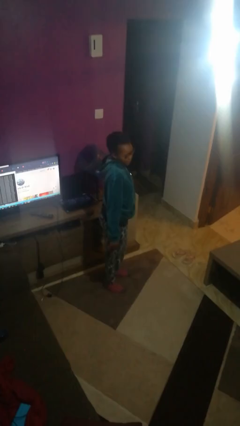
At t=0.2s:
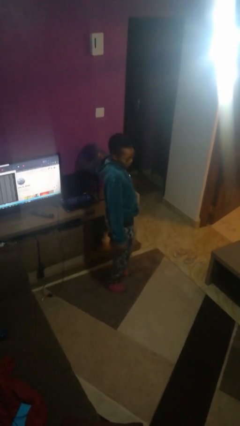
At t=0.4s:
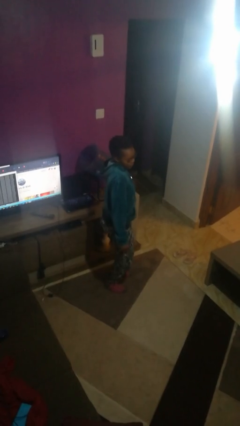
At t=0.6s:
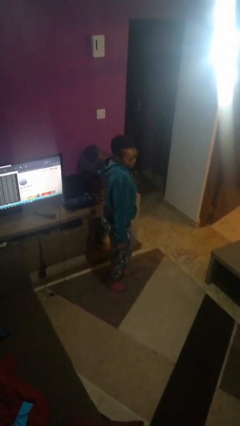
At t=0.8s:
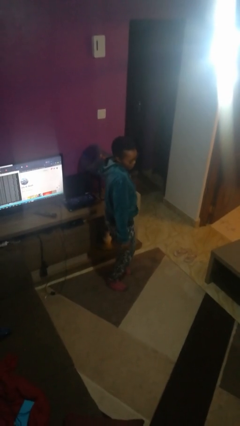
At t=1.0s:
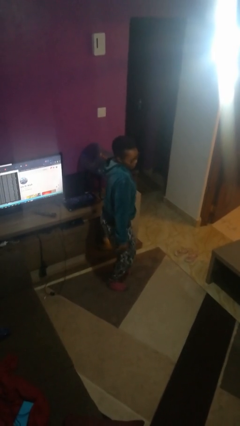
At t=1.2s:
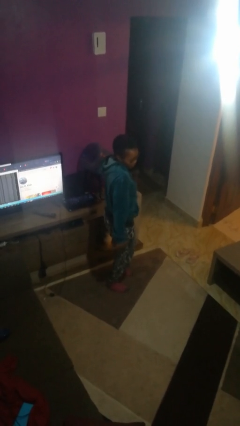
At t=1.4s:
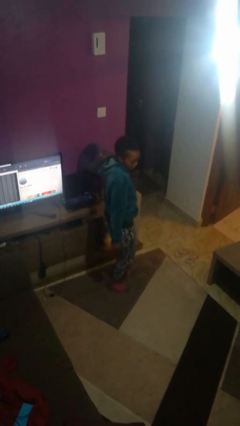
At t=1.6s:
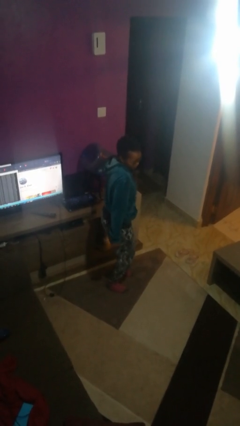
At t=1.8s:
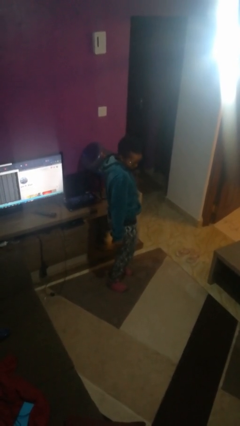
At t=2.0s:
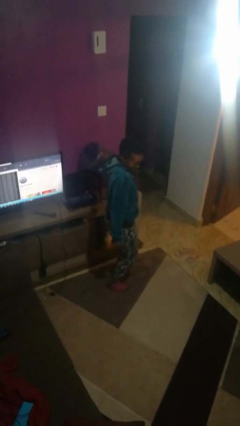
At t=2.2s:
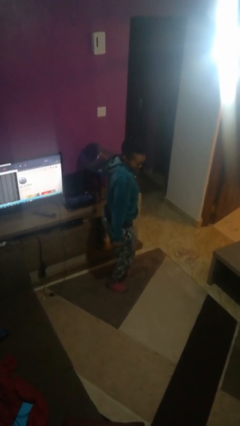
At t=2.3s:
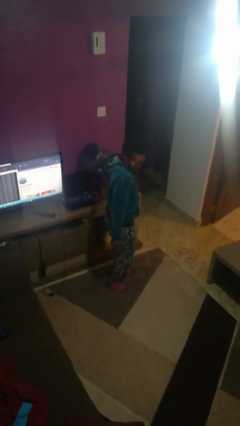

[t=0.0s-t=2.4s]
person wiggles hips

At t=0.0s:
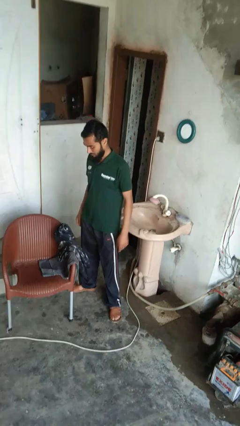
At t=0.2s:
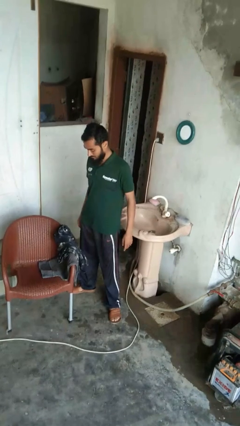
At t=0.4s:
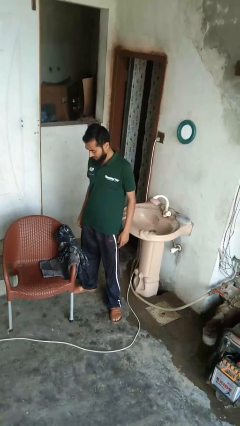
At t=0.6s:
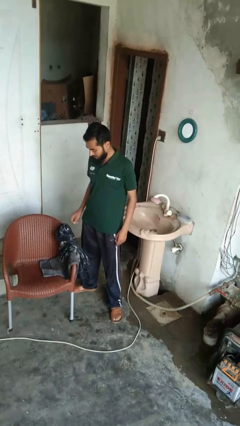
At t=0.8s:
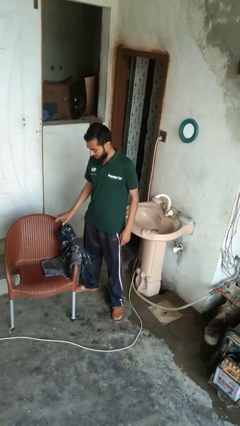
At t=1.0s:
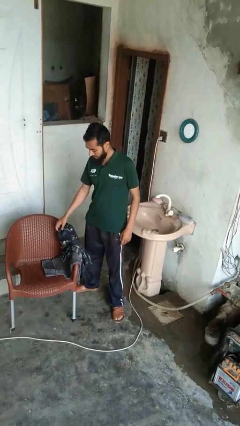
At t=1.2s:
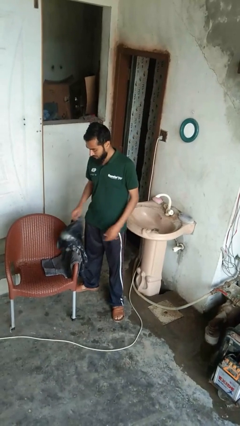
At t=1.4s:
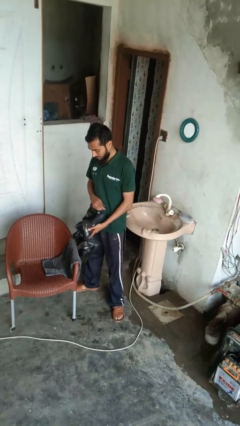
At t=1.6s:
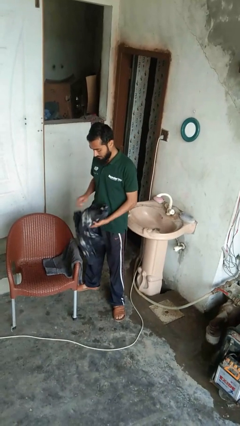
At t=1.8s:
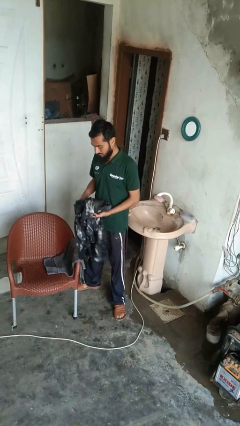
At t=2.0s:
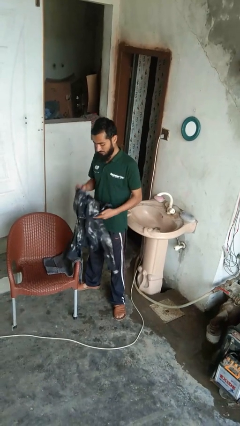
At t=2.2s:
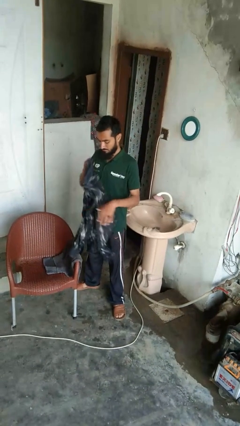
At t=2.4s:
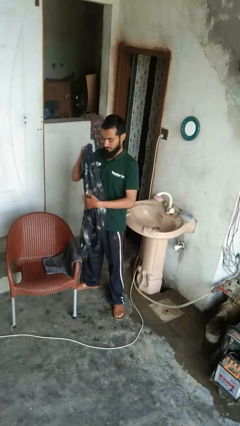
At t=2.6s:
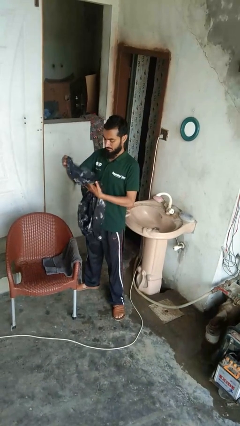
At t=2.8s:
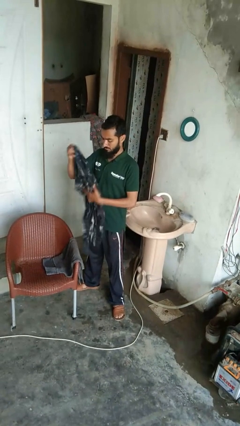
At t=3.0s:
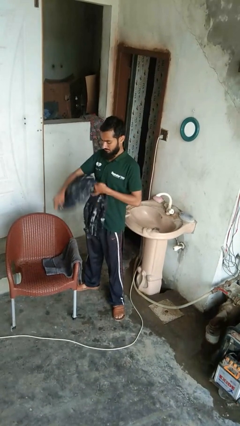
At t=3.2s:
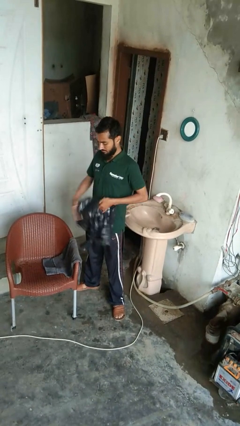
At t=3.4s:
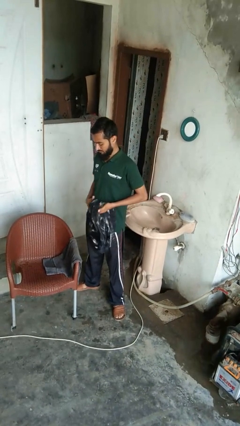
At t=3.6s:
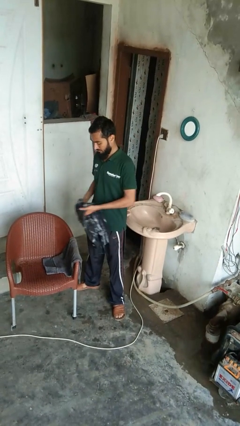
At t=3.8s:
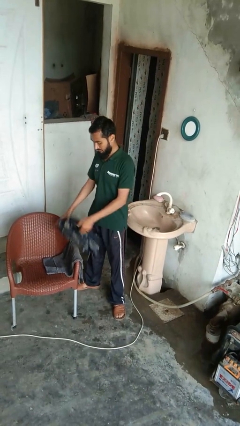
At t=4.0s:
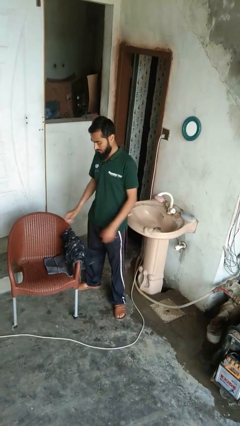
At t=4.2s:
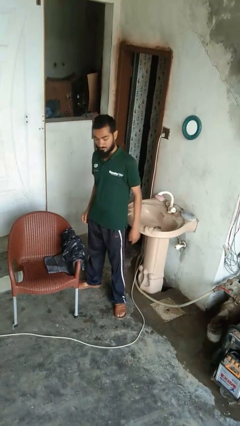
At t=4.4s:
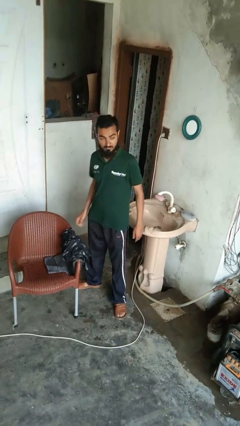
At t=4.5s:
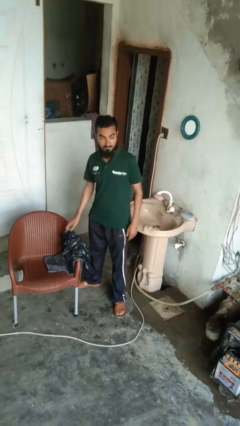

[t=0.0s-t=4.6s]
person folds shirt

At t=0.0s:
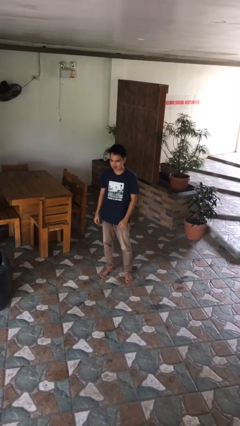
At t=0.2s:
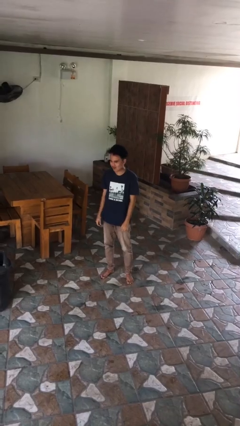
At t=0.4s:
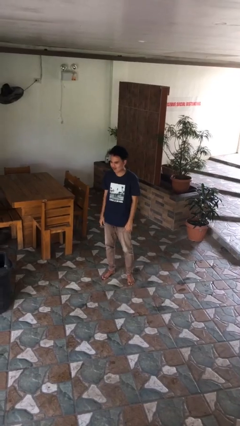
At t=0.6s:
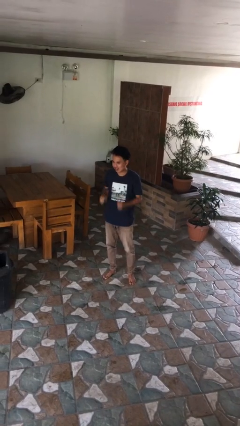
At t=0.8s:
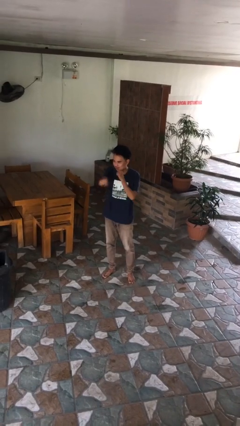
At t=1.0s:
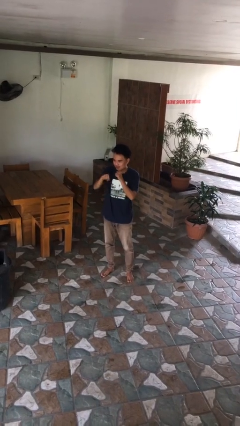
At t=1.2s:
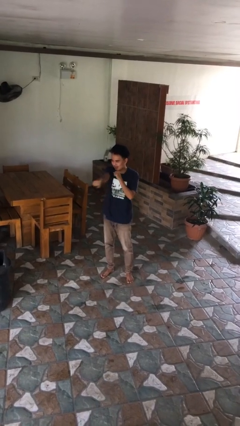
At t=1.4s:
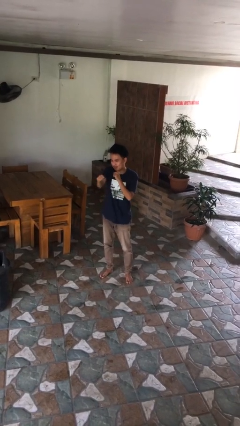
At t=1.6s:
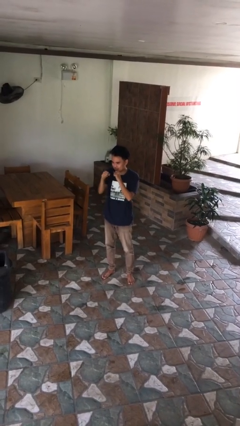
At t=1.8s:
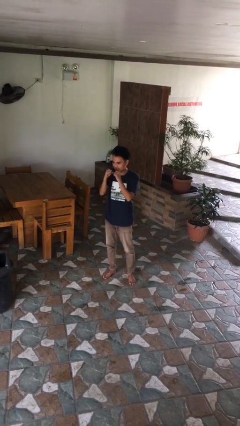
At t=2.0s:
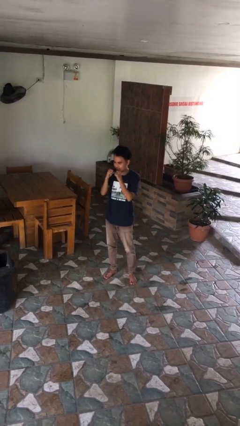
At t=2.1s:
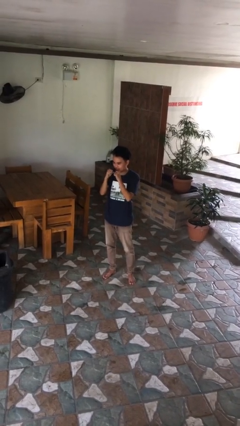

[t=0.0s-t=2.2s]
person punches

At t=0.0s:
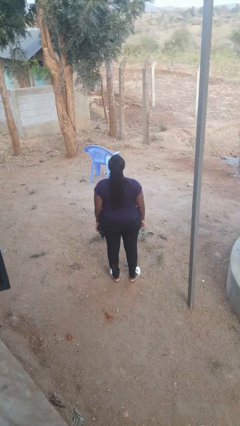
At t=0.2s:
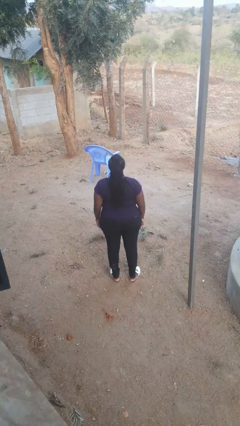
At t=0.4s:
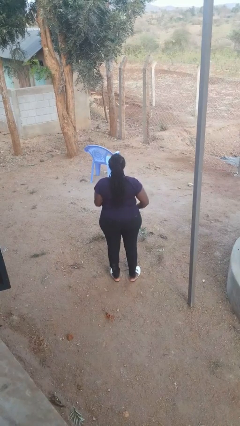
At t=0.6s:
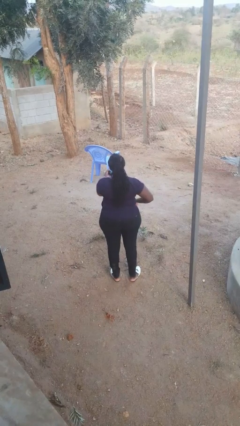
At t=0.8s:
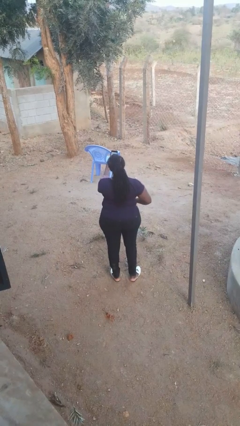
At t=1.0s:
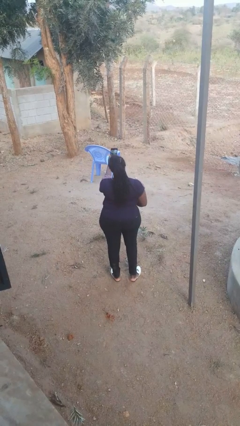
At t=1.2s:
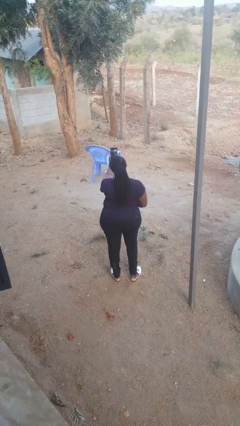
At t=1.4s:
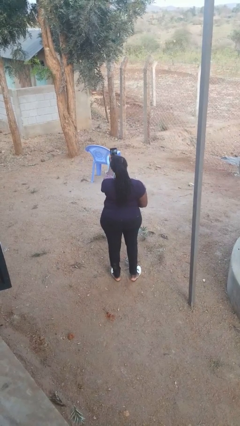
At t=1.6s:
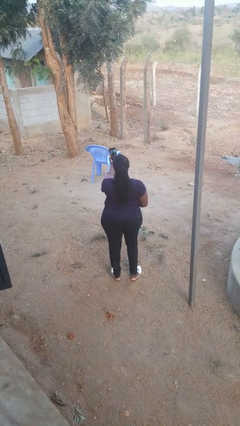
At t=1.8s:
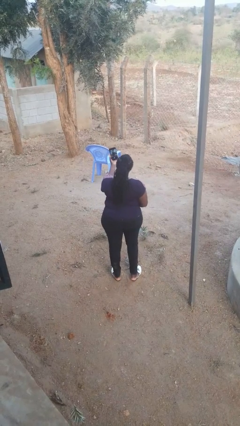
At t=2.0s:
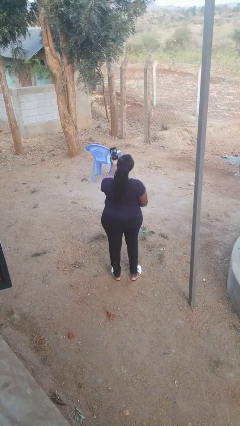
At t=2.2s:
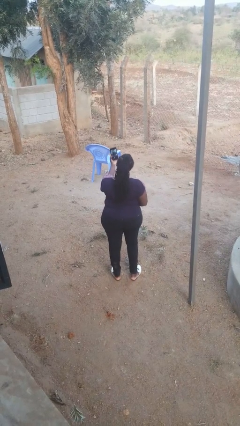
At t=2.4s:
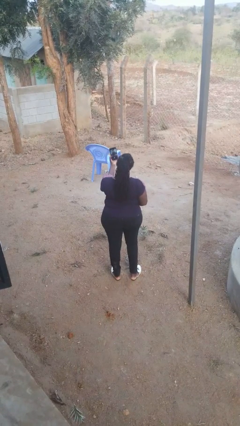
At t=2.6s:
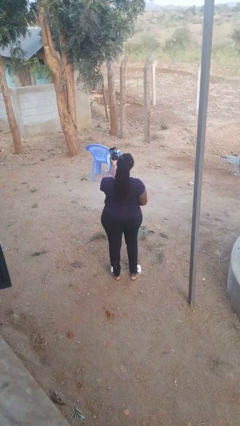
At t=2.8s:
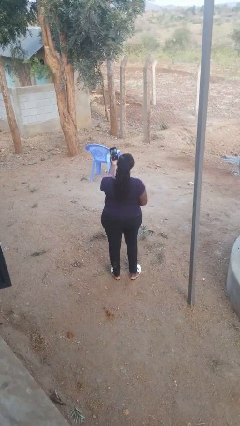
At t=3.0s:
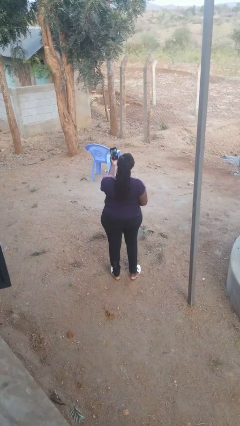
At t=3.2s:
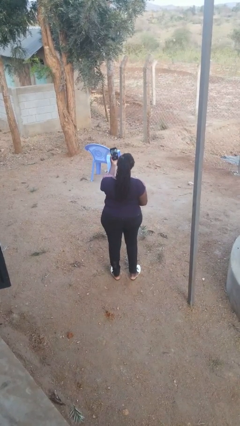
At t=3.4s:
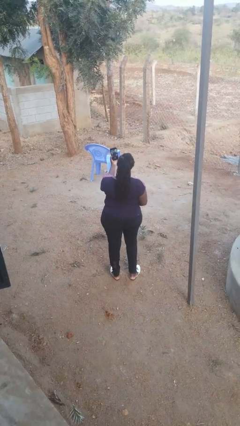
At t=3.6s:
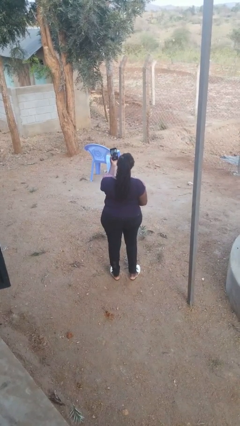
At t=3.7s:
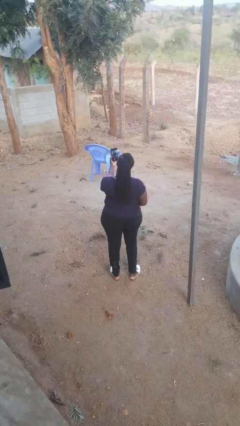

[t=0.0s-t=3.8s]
person takes selfie

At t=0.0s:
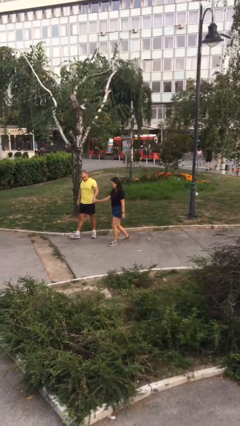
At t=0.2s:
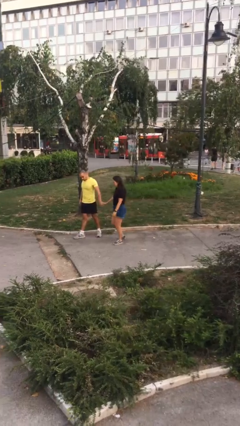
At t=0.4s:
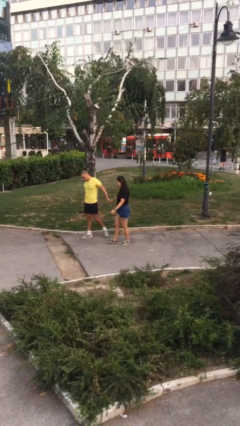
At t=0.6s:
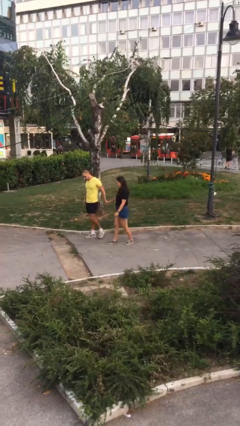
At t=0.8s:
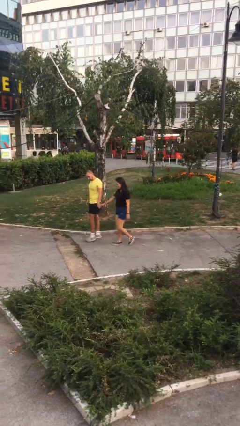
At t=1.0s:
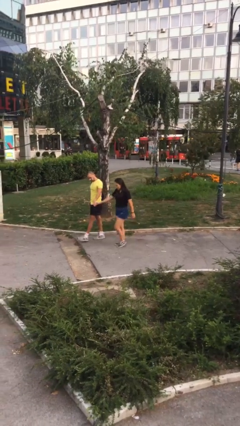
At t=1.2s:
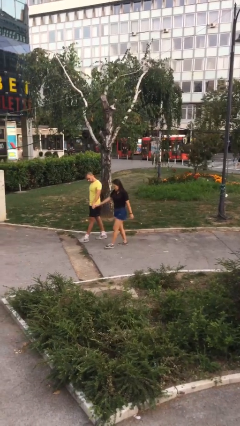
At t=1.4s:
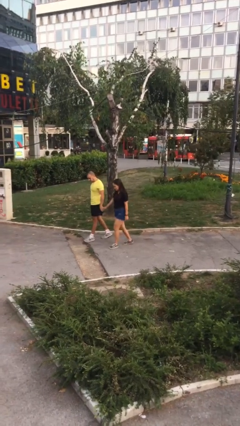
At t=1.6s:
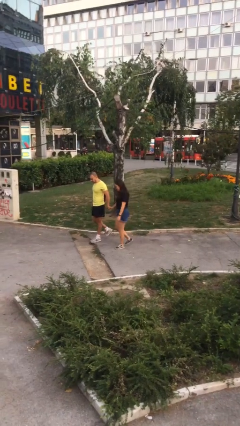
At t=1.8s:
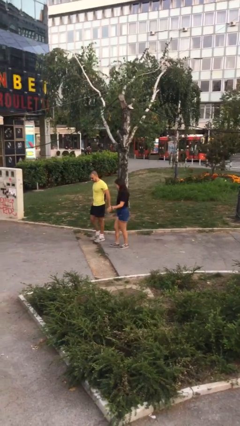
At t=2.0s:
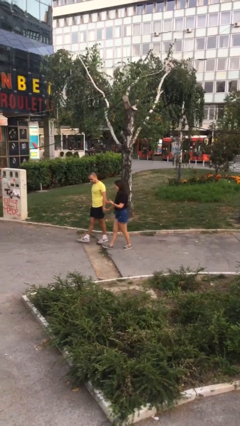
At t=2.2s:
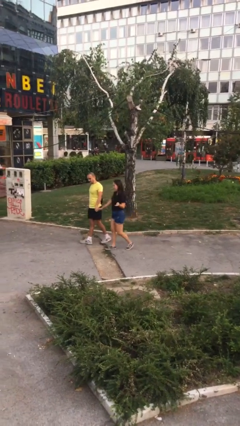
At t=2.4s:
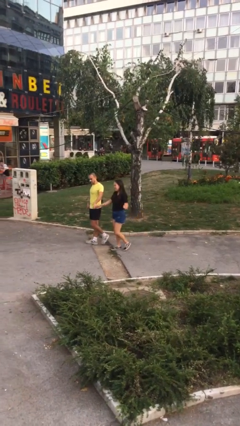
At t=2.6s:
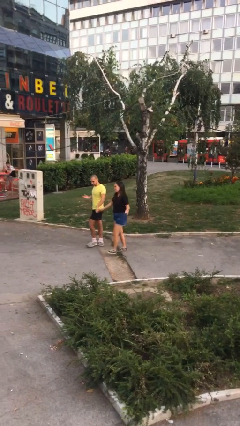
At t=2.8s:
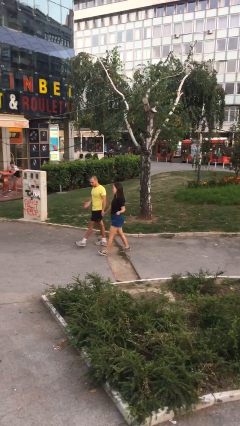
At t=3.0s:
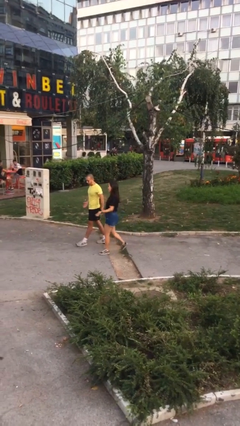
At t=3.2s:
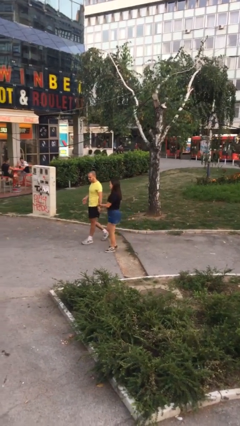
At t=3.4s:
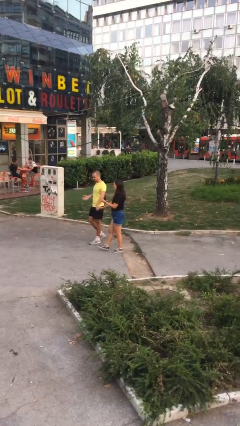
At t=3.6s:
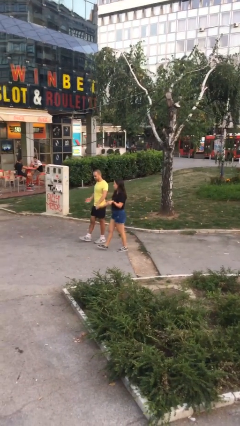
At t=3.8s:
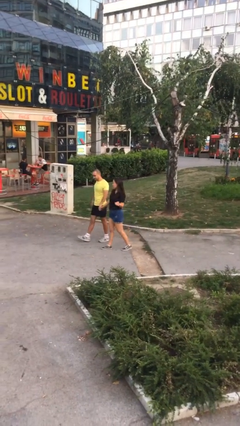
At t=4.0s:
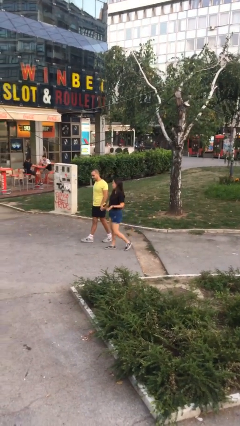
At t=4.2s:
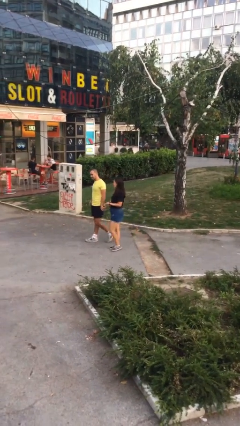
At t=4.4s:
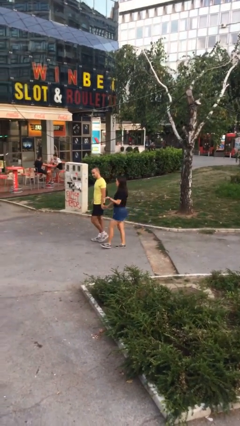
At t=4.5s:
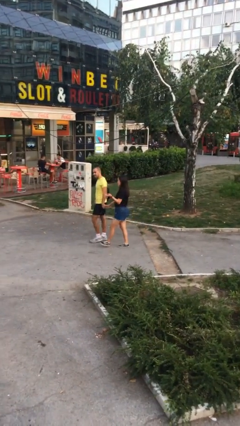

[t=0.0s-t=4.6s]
person holds hand
